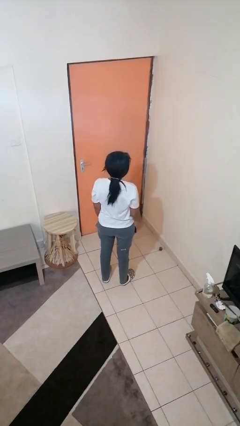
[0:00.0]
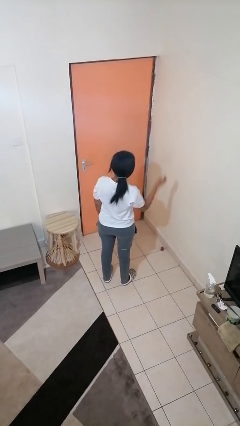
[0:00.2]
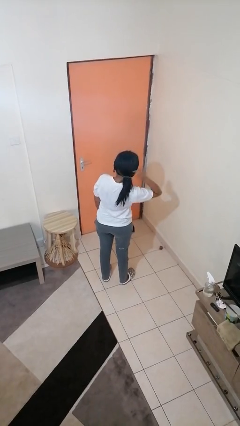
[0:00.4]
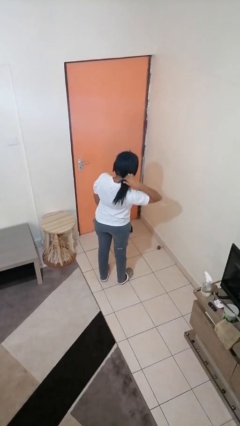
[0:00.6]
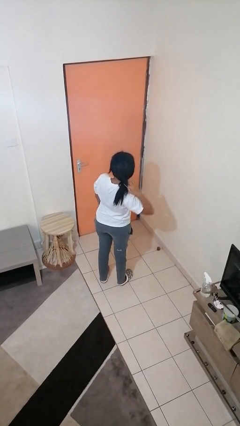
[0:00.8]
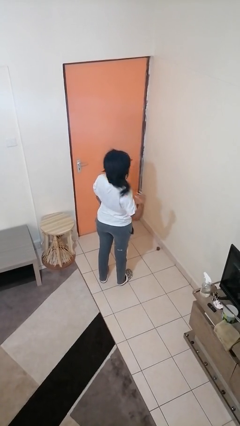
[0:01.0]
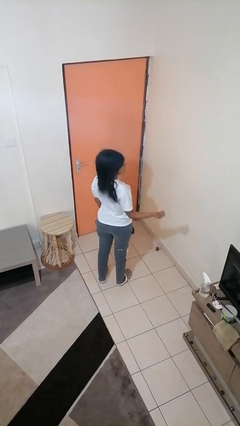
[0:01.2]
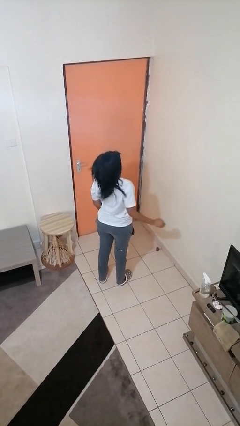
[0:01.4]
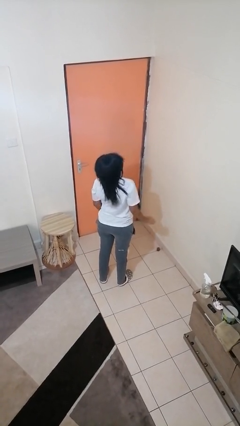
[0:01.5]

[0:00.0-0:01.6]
person takes off hairtie

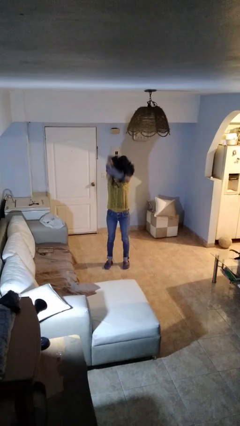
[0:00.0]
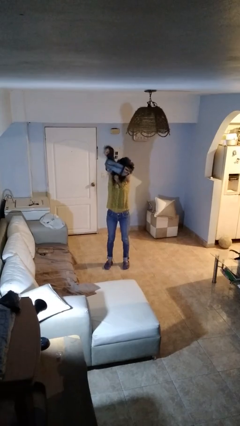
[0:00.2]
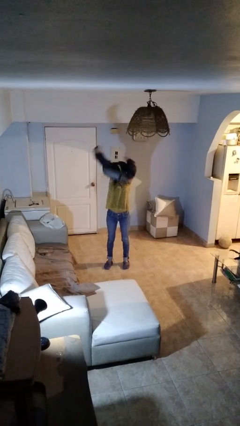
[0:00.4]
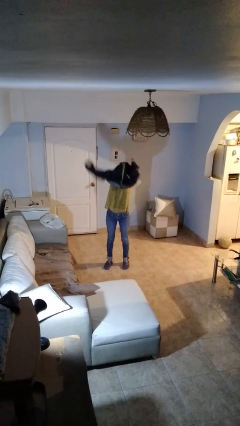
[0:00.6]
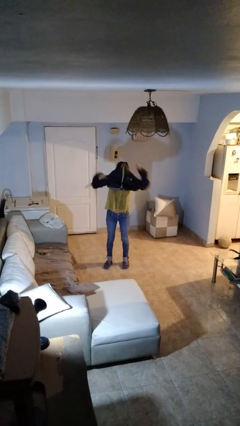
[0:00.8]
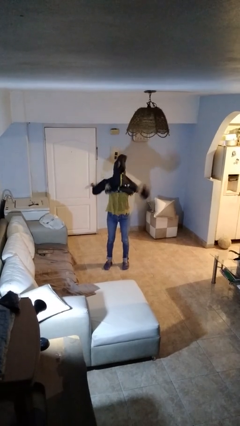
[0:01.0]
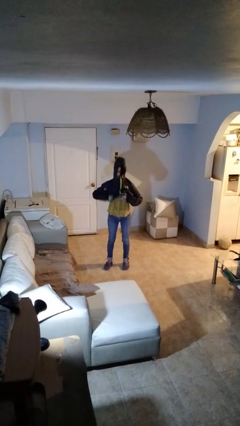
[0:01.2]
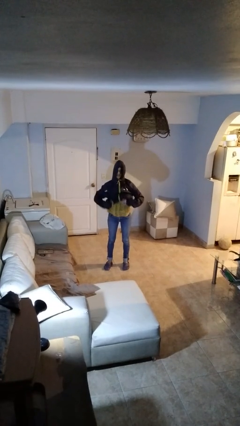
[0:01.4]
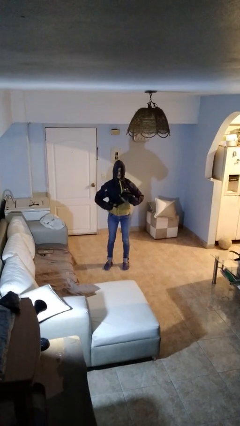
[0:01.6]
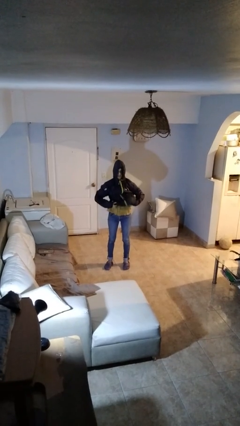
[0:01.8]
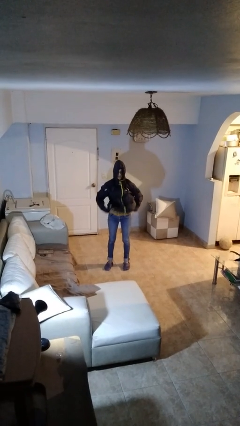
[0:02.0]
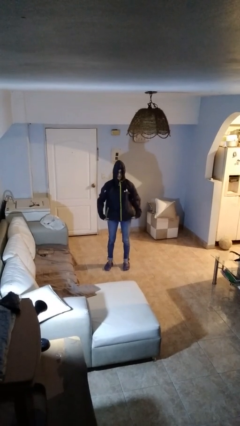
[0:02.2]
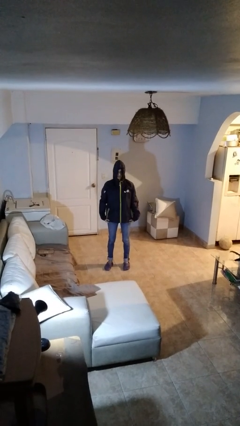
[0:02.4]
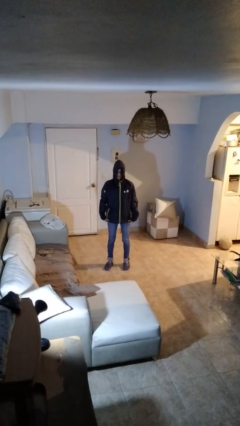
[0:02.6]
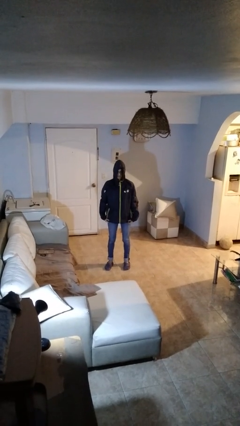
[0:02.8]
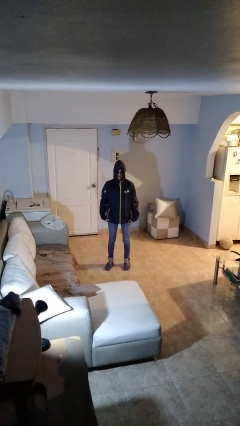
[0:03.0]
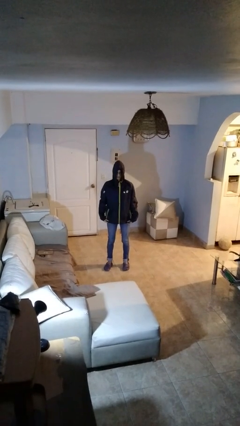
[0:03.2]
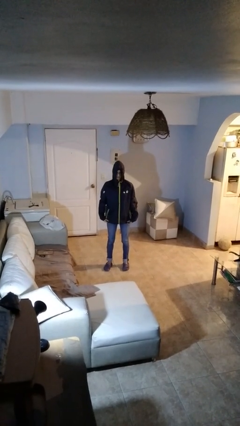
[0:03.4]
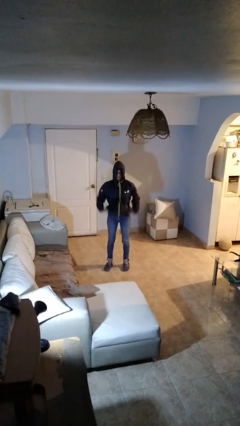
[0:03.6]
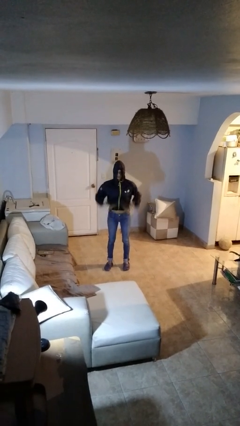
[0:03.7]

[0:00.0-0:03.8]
person puts on hoodie

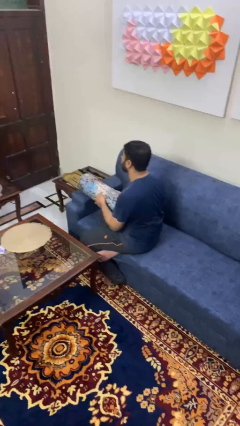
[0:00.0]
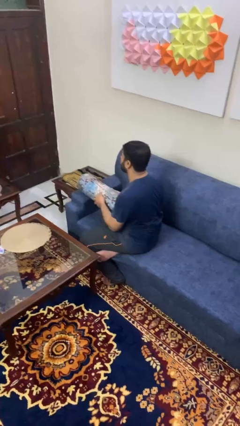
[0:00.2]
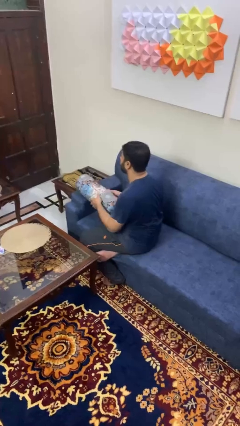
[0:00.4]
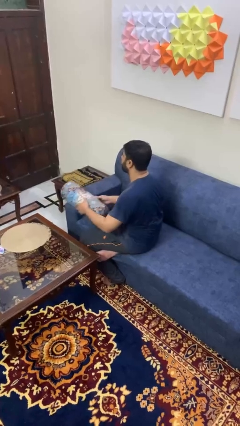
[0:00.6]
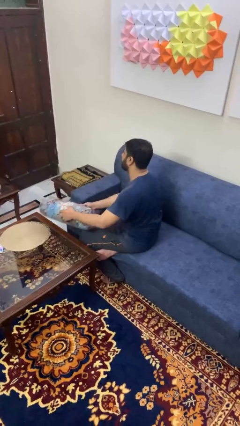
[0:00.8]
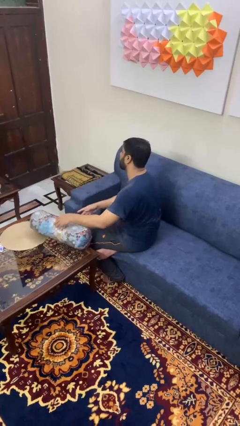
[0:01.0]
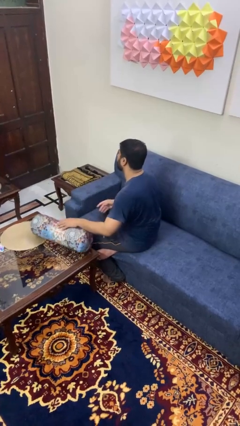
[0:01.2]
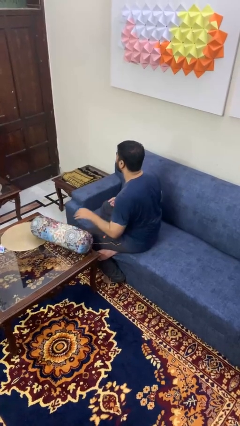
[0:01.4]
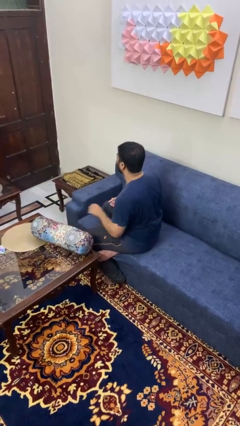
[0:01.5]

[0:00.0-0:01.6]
person throws object on table

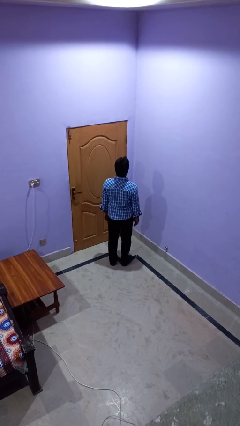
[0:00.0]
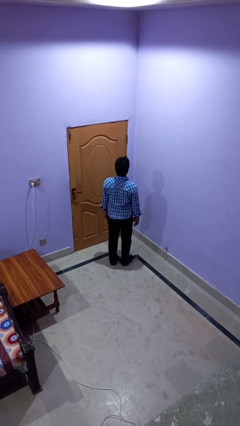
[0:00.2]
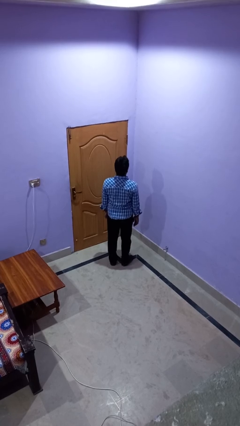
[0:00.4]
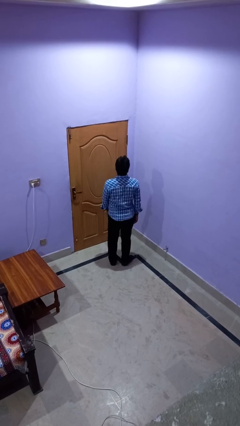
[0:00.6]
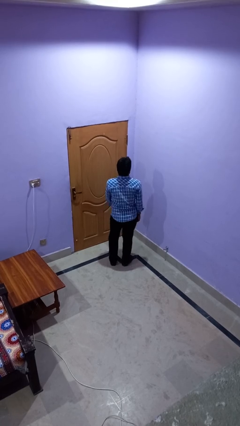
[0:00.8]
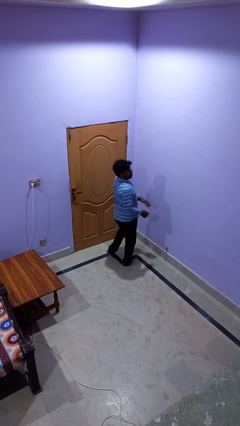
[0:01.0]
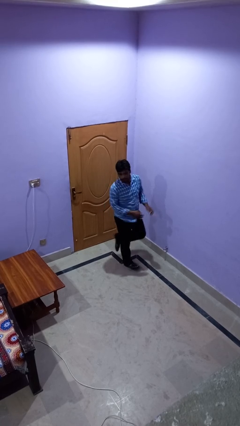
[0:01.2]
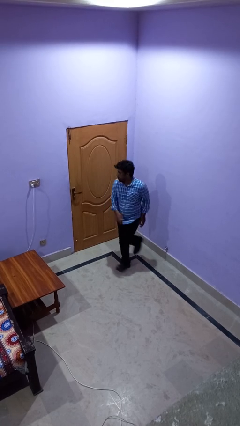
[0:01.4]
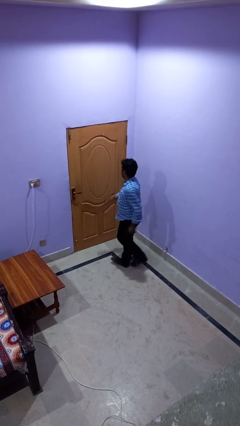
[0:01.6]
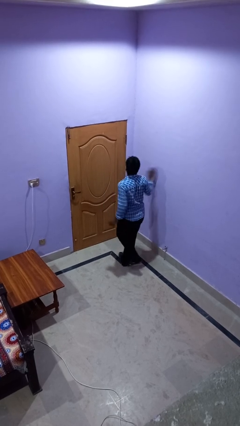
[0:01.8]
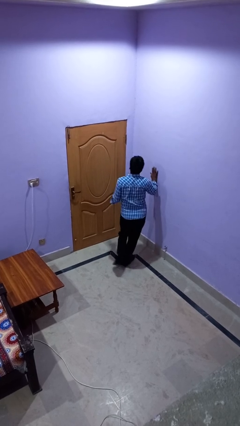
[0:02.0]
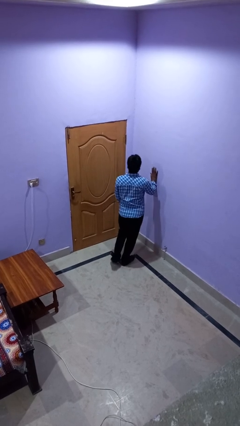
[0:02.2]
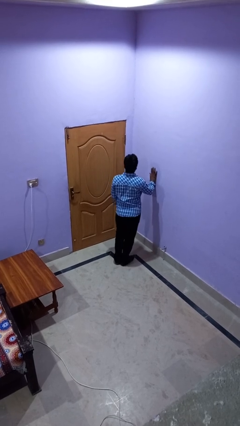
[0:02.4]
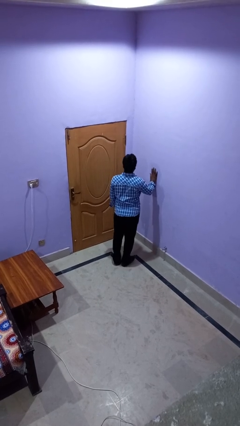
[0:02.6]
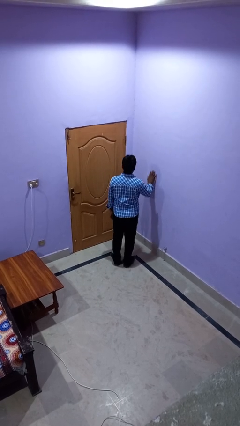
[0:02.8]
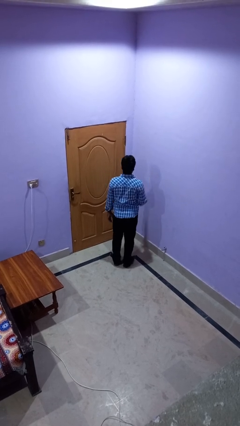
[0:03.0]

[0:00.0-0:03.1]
person twirls

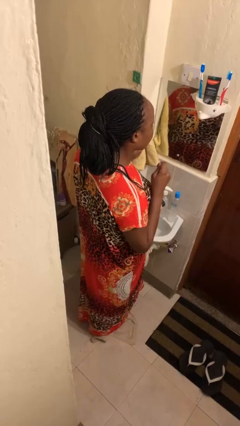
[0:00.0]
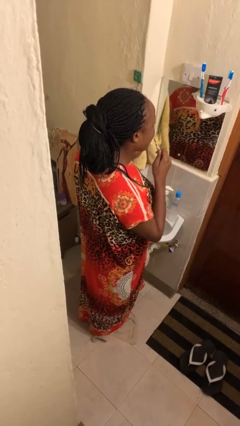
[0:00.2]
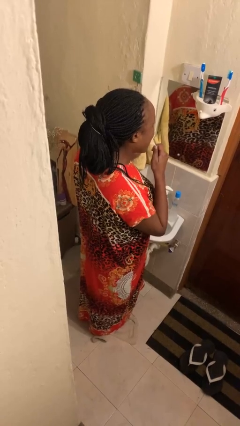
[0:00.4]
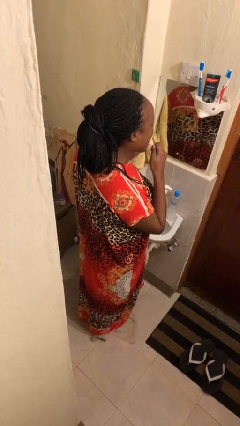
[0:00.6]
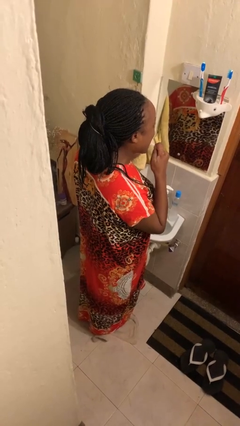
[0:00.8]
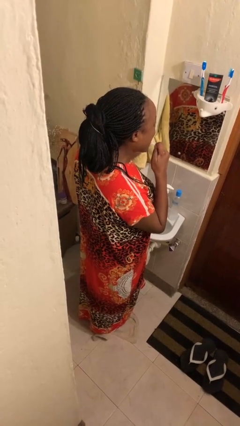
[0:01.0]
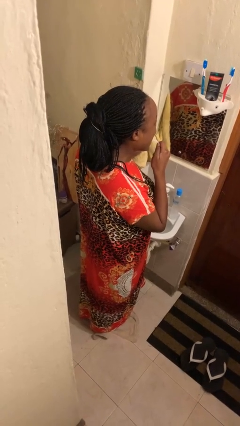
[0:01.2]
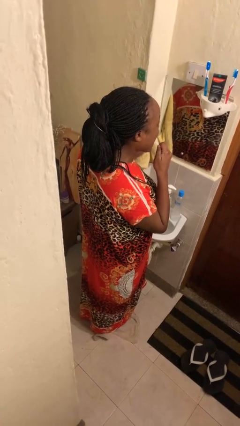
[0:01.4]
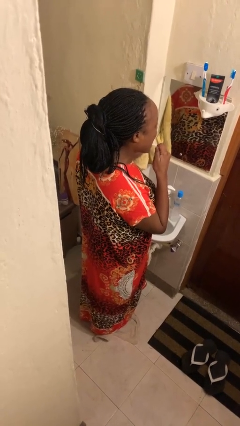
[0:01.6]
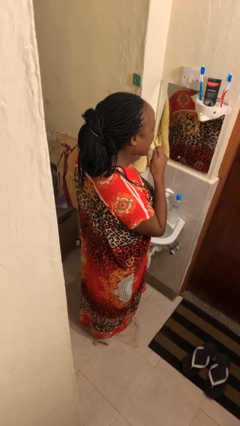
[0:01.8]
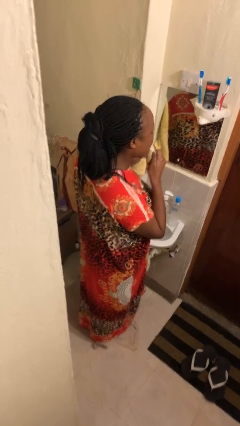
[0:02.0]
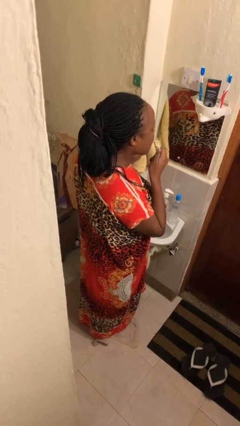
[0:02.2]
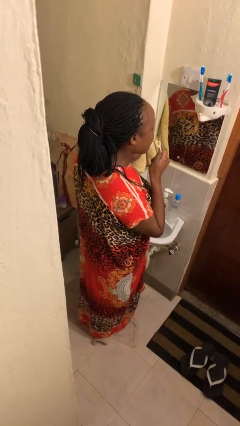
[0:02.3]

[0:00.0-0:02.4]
person flosses

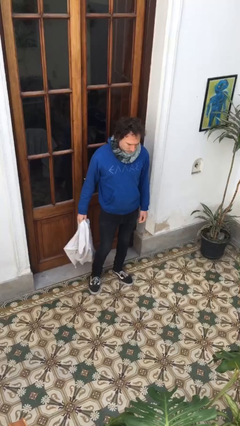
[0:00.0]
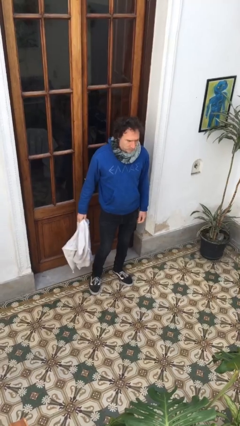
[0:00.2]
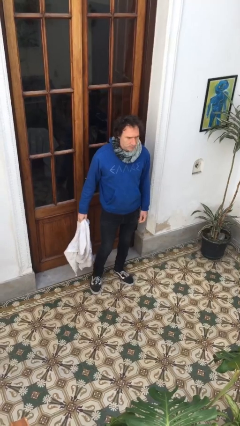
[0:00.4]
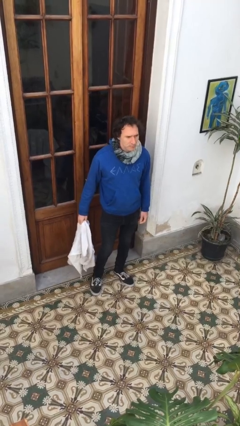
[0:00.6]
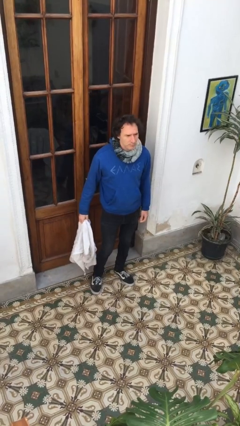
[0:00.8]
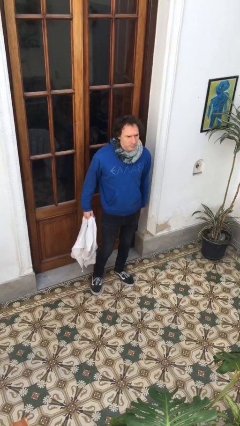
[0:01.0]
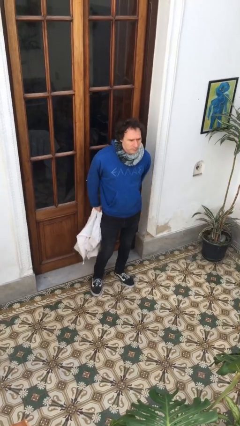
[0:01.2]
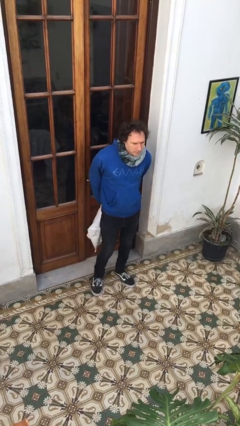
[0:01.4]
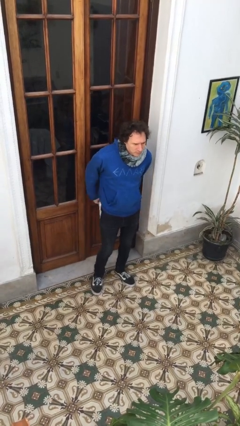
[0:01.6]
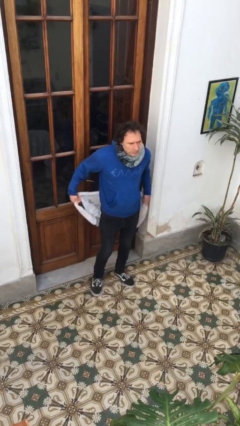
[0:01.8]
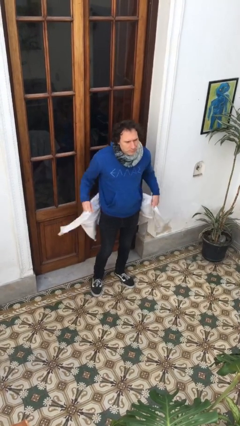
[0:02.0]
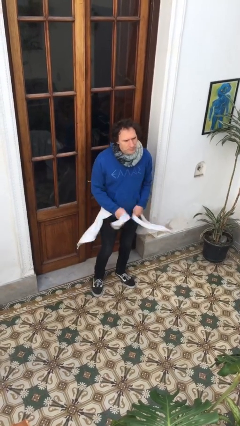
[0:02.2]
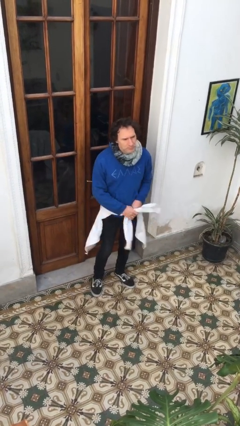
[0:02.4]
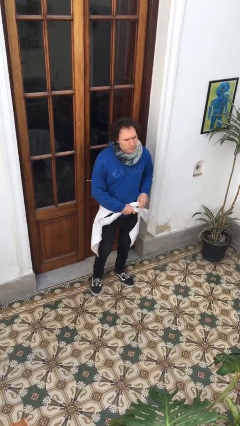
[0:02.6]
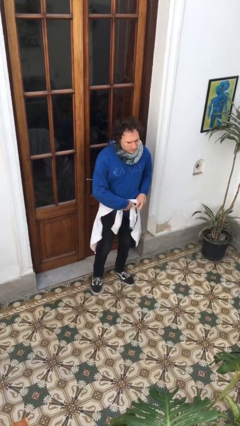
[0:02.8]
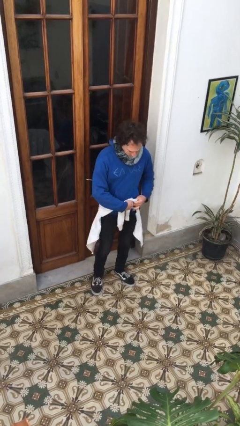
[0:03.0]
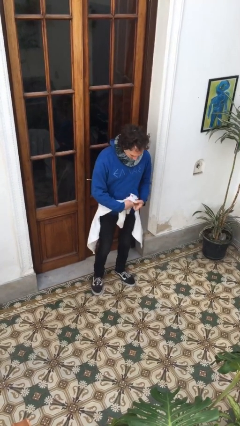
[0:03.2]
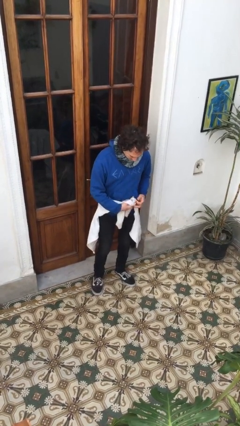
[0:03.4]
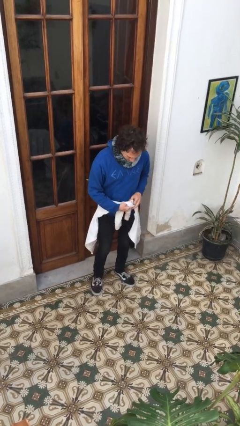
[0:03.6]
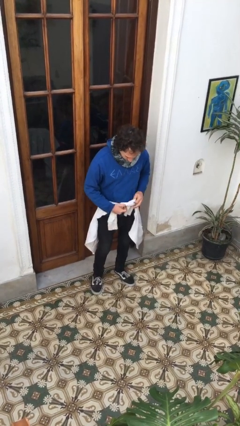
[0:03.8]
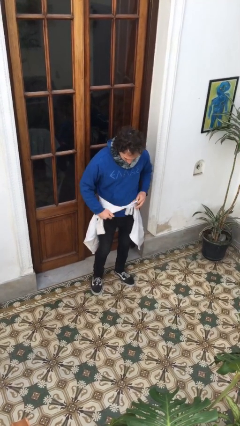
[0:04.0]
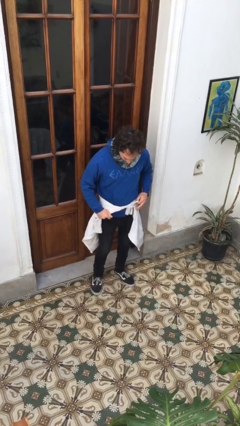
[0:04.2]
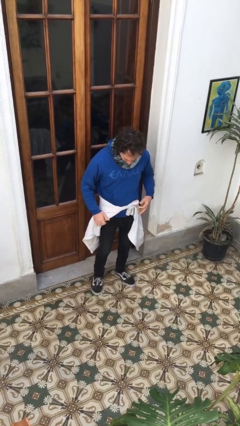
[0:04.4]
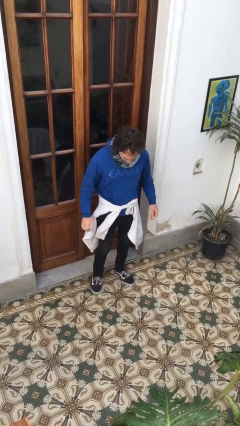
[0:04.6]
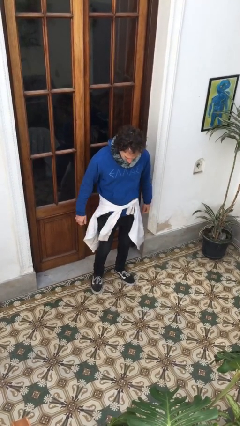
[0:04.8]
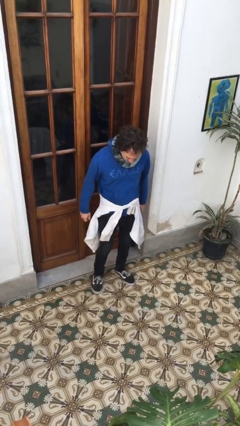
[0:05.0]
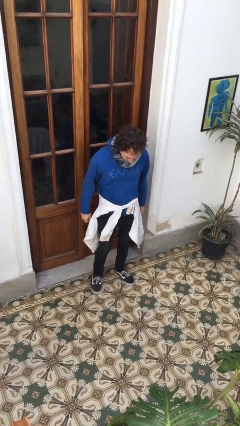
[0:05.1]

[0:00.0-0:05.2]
person ties jacket around waist
